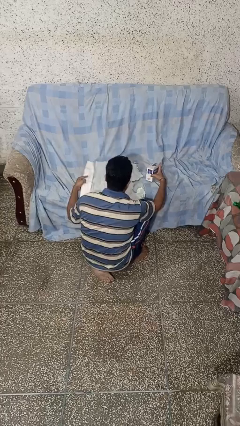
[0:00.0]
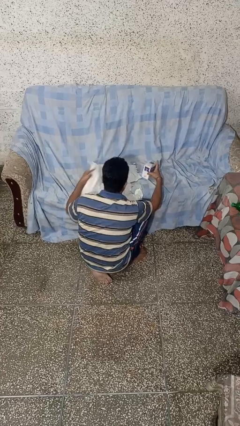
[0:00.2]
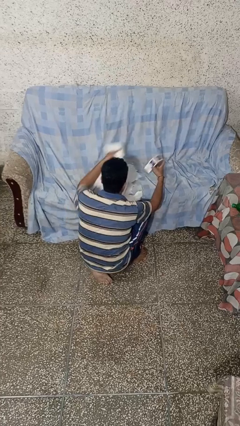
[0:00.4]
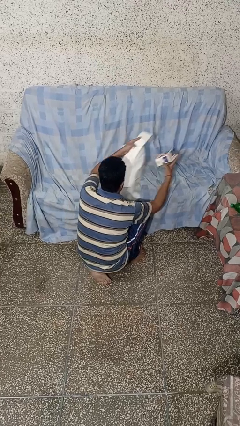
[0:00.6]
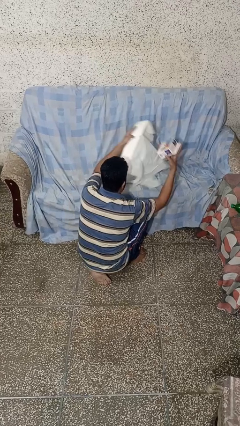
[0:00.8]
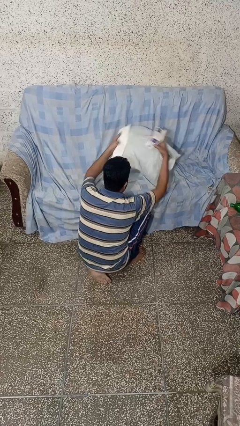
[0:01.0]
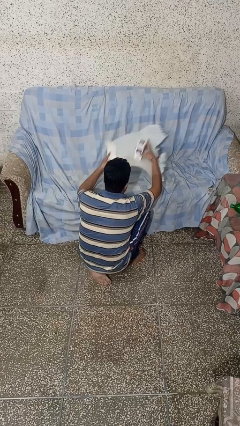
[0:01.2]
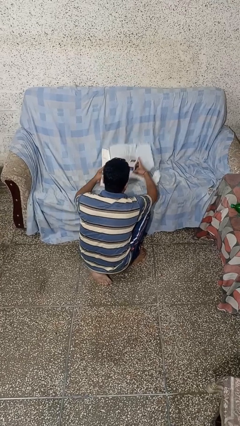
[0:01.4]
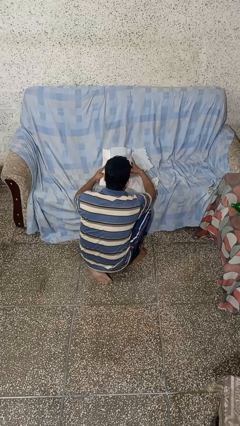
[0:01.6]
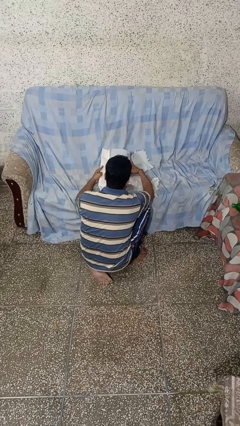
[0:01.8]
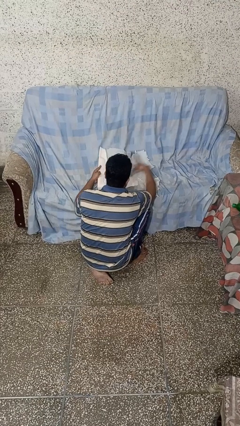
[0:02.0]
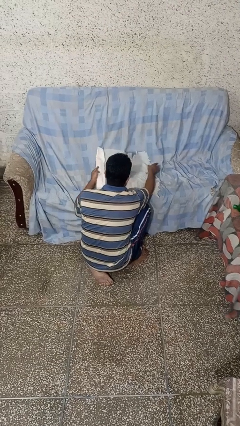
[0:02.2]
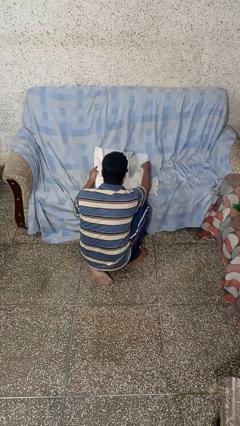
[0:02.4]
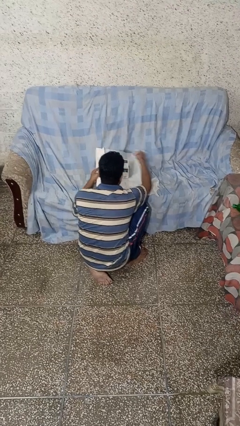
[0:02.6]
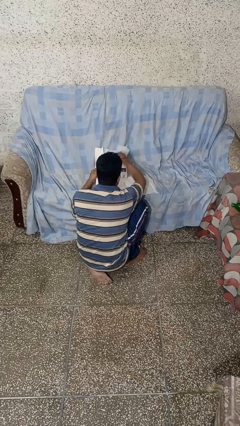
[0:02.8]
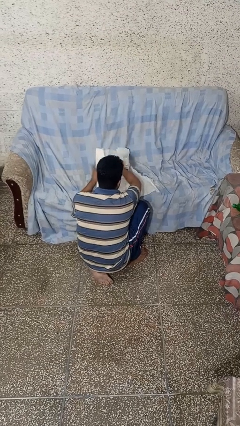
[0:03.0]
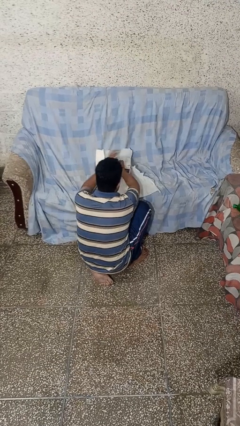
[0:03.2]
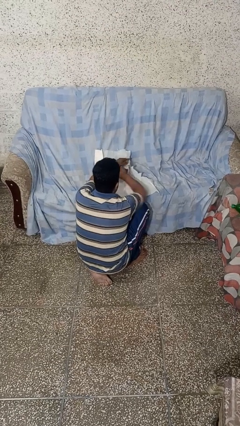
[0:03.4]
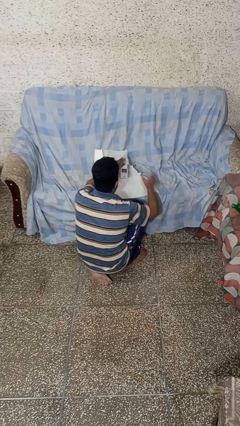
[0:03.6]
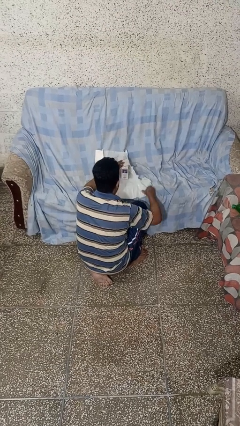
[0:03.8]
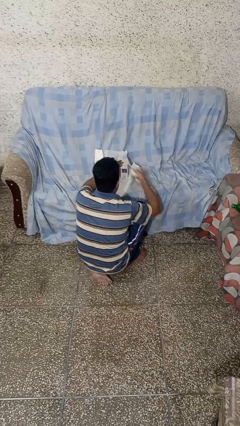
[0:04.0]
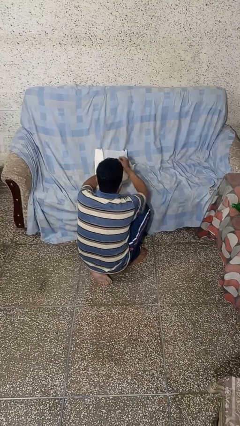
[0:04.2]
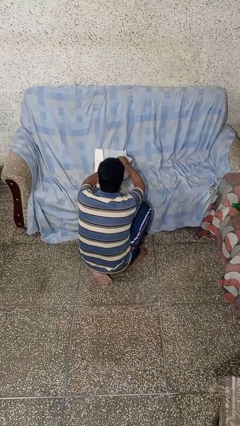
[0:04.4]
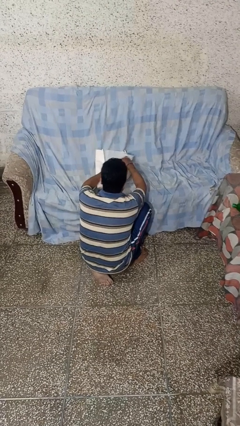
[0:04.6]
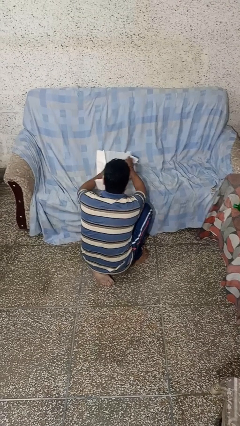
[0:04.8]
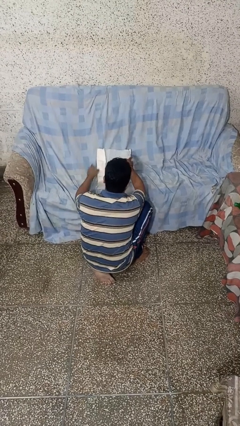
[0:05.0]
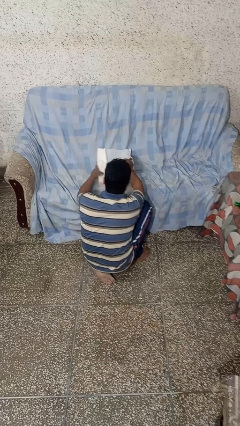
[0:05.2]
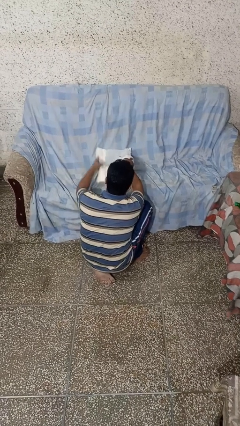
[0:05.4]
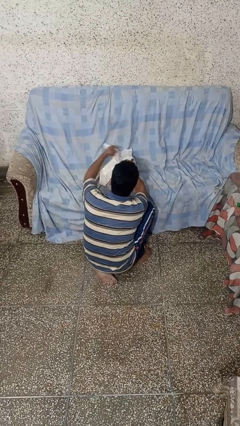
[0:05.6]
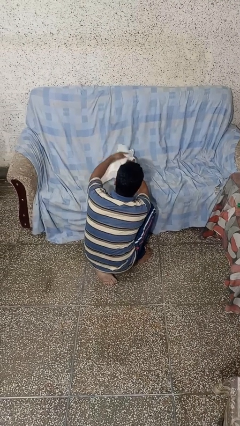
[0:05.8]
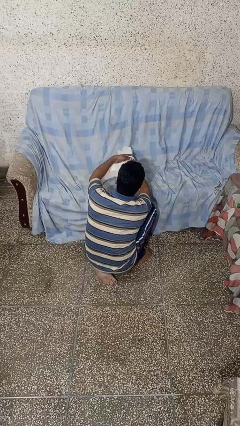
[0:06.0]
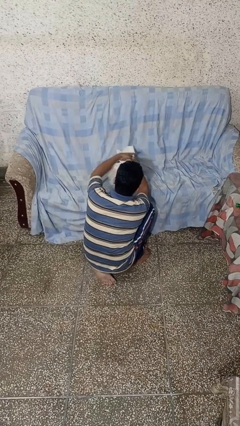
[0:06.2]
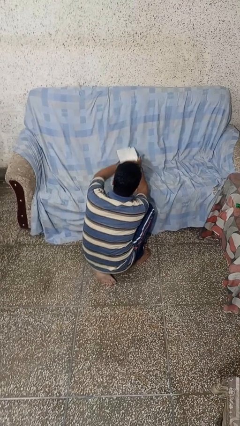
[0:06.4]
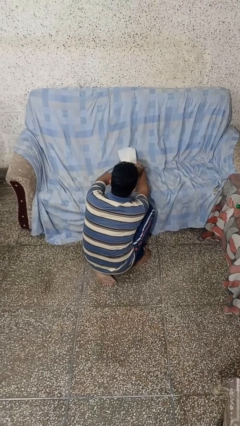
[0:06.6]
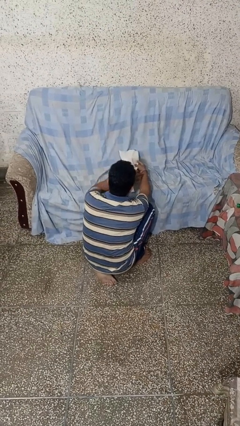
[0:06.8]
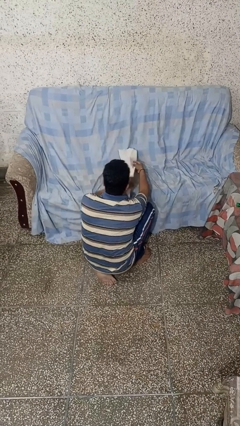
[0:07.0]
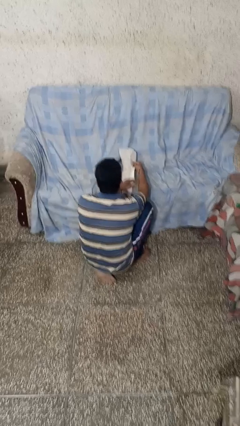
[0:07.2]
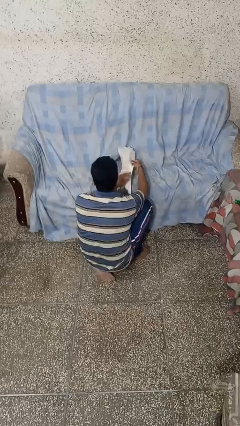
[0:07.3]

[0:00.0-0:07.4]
person wraps box

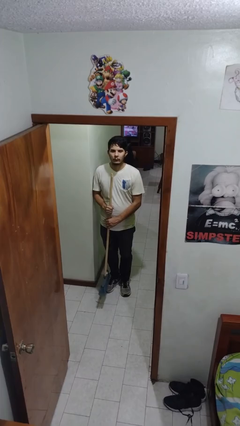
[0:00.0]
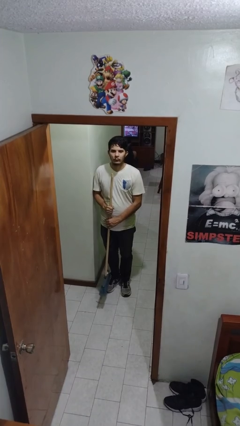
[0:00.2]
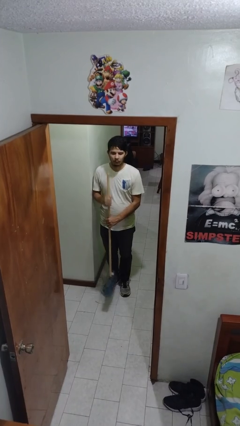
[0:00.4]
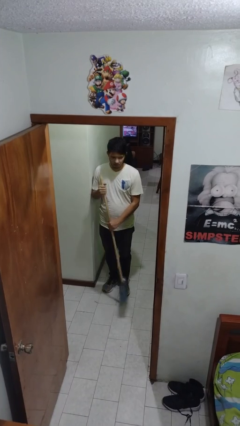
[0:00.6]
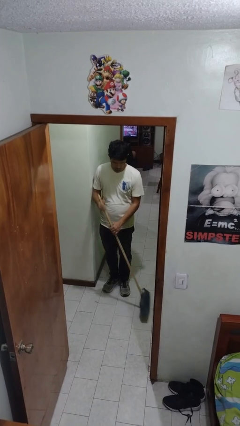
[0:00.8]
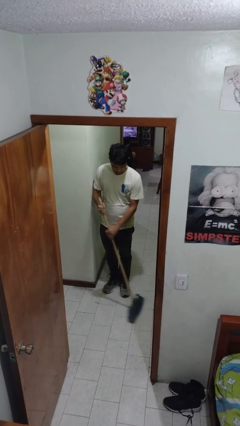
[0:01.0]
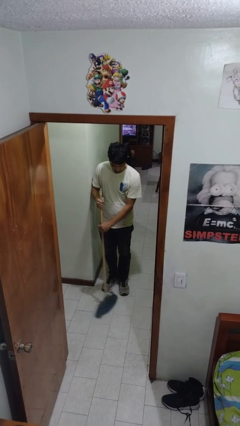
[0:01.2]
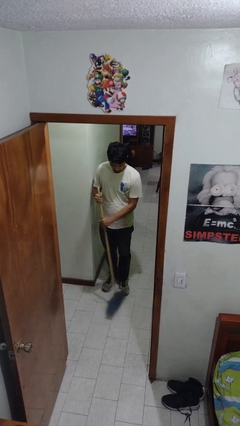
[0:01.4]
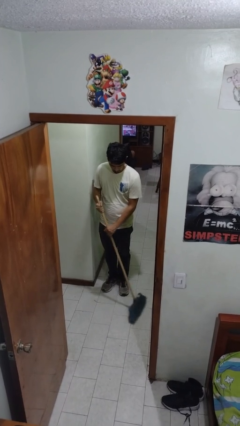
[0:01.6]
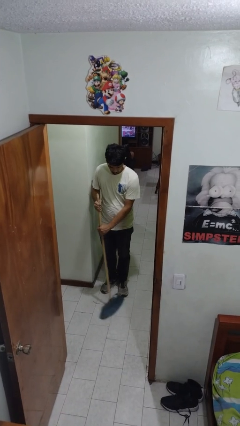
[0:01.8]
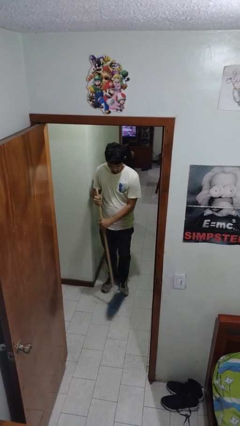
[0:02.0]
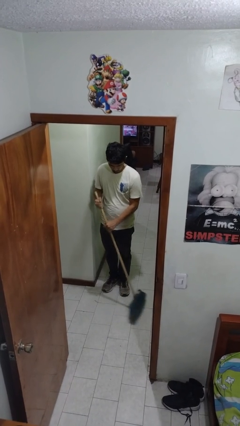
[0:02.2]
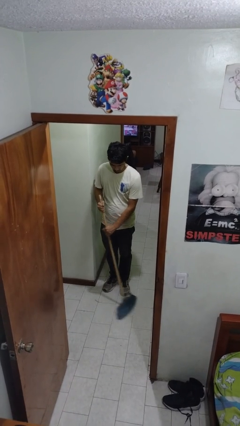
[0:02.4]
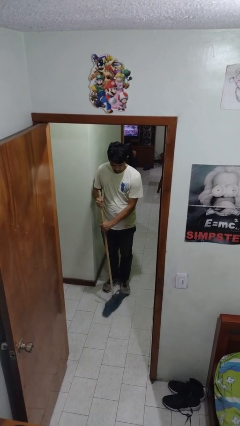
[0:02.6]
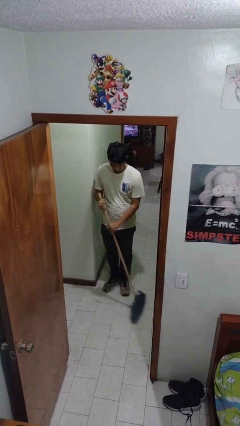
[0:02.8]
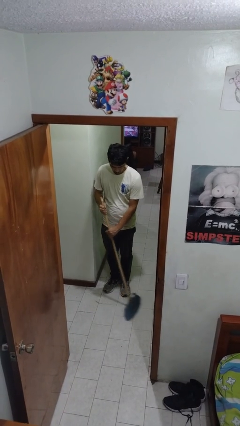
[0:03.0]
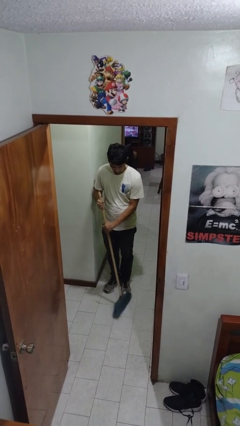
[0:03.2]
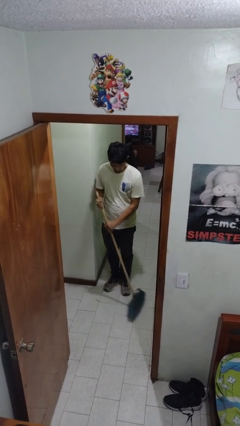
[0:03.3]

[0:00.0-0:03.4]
person sweeps floor

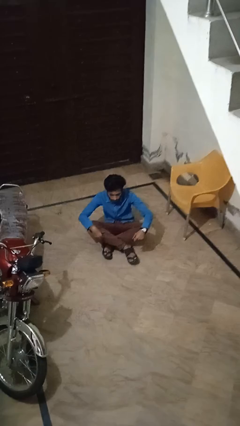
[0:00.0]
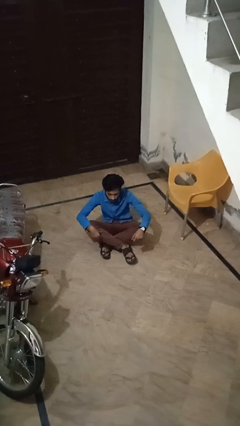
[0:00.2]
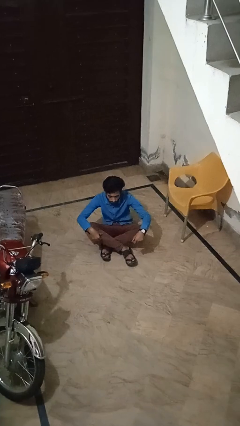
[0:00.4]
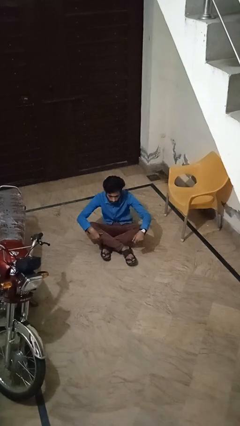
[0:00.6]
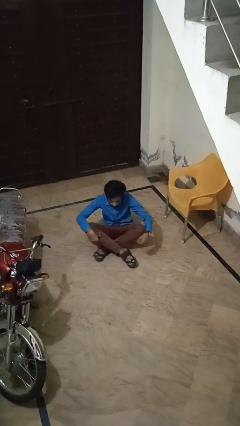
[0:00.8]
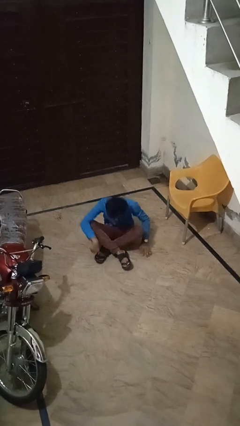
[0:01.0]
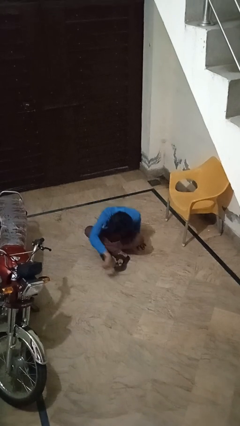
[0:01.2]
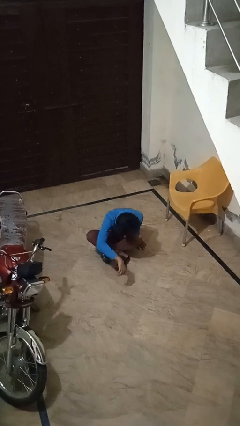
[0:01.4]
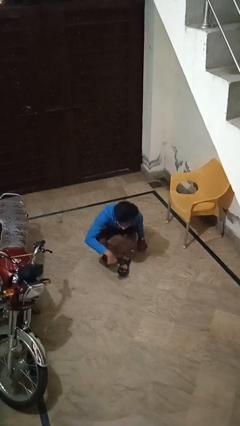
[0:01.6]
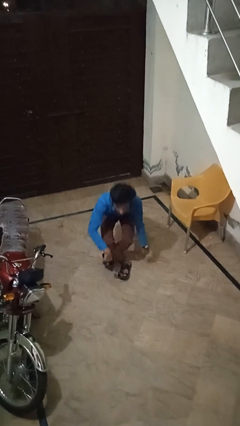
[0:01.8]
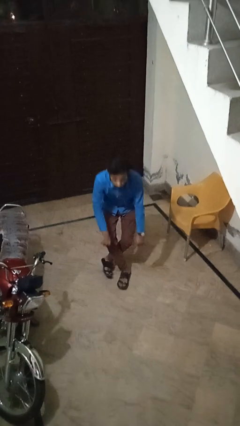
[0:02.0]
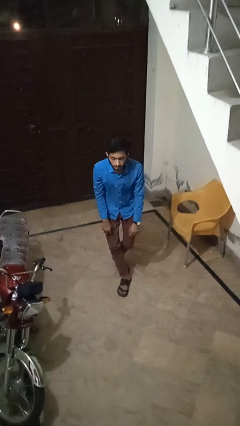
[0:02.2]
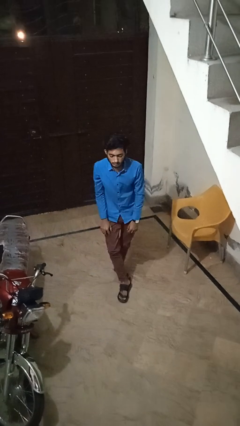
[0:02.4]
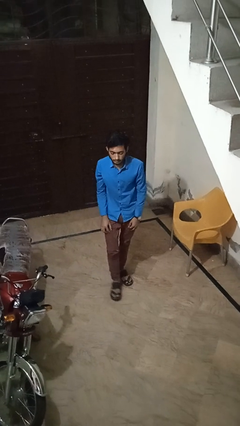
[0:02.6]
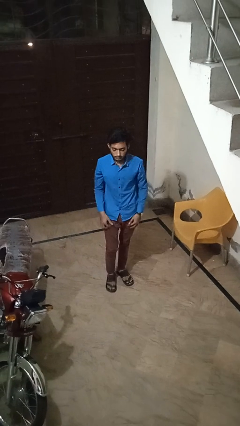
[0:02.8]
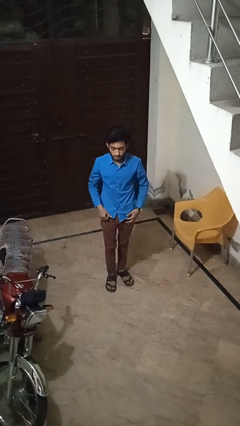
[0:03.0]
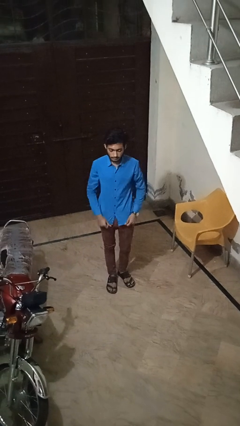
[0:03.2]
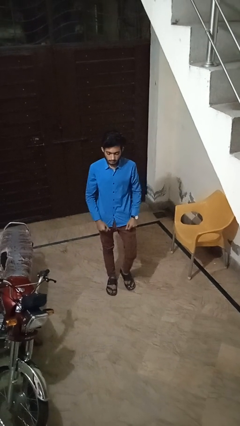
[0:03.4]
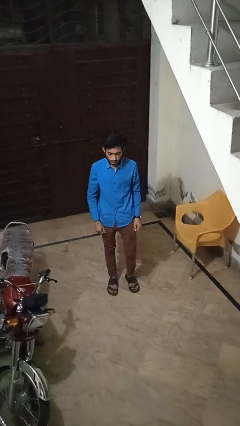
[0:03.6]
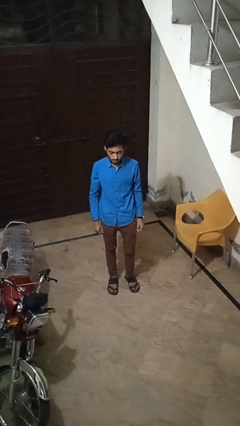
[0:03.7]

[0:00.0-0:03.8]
person stands up from floor

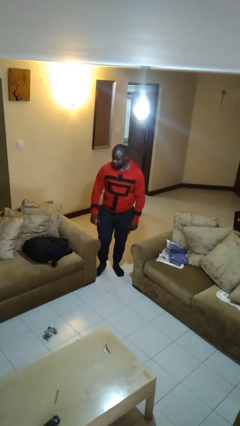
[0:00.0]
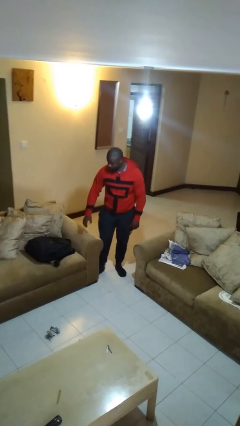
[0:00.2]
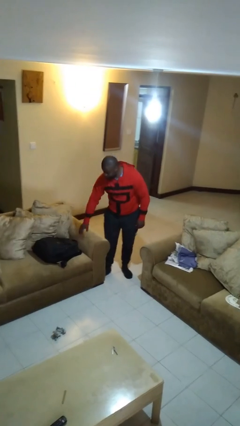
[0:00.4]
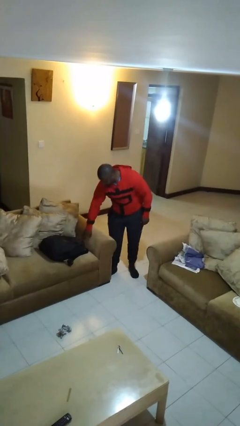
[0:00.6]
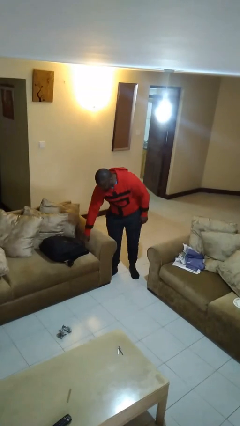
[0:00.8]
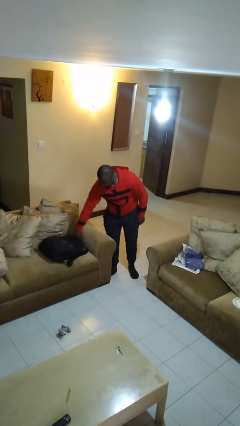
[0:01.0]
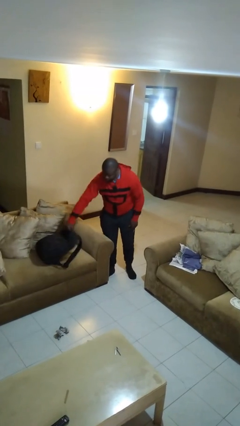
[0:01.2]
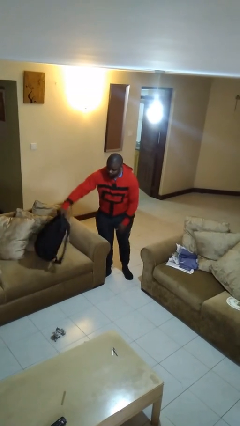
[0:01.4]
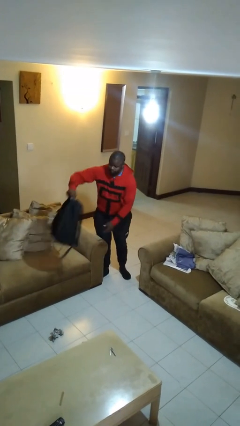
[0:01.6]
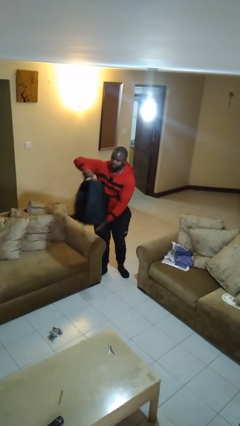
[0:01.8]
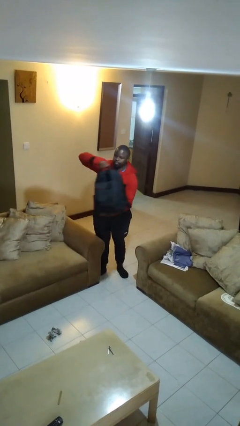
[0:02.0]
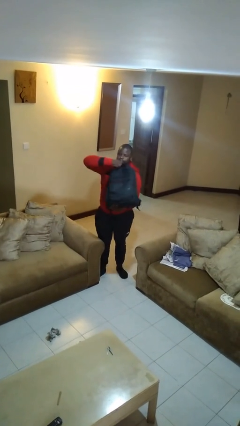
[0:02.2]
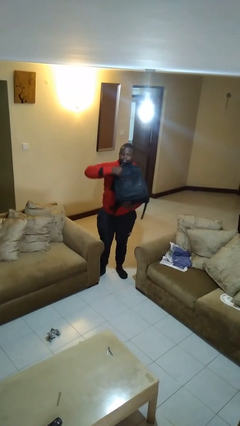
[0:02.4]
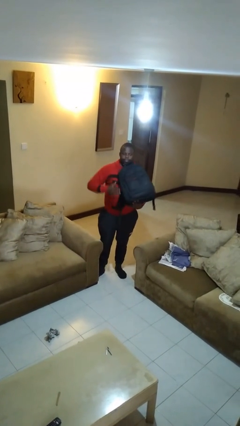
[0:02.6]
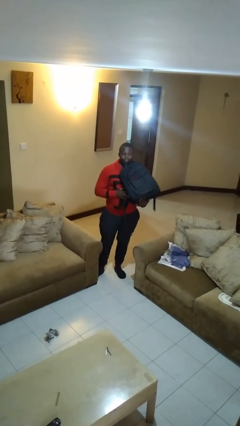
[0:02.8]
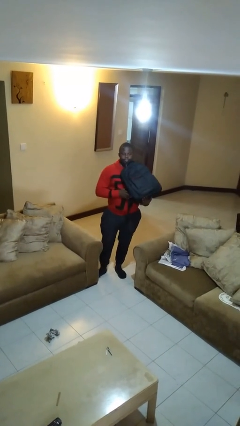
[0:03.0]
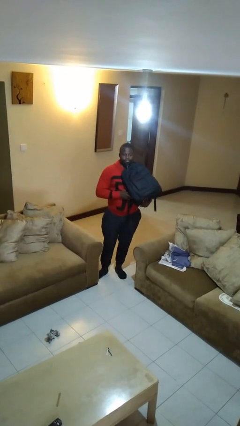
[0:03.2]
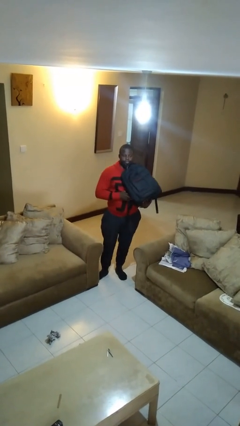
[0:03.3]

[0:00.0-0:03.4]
person picks up object from couch
